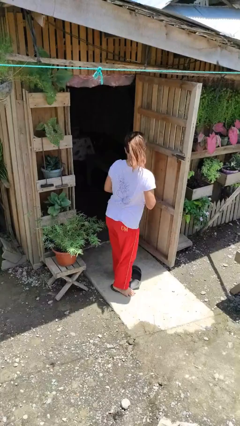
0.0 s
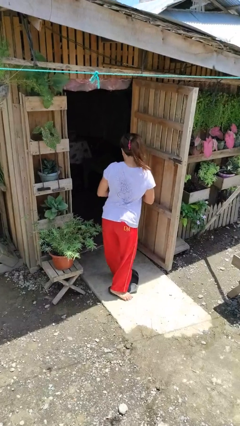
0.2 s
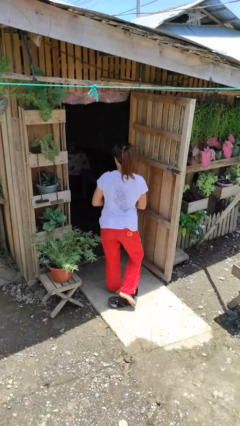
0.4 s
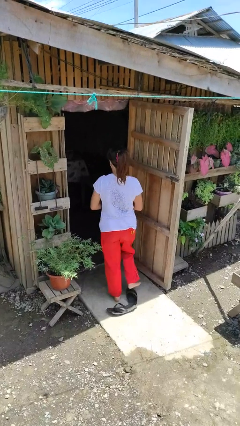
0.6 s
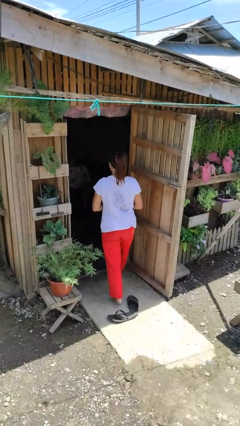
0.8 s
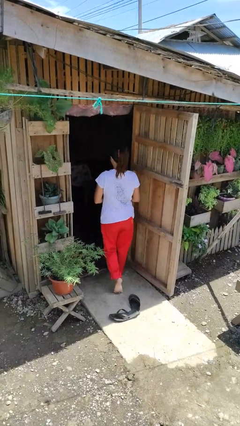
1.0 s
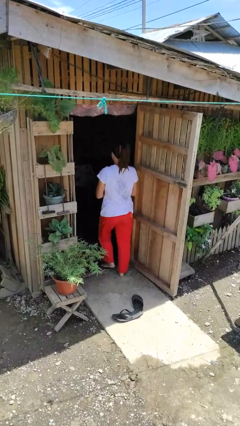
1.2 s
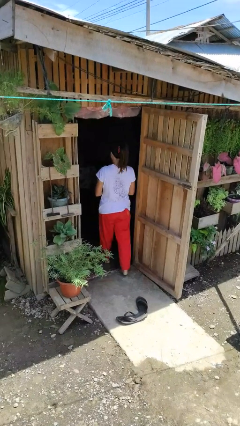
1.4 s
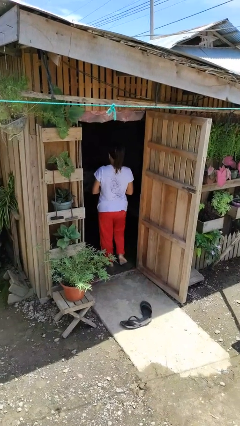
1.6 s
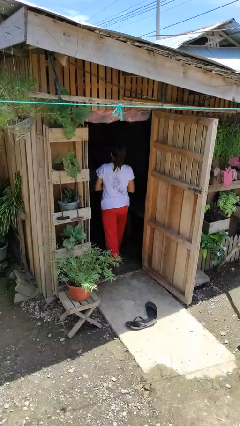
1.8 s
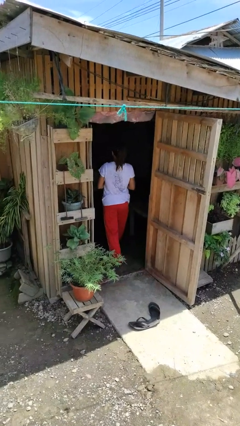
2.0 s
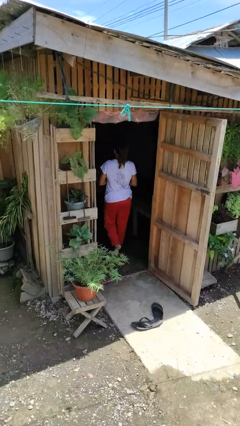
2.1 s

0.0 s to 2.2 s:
person exits scene through structure

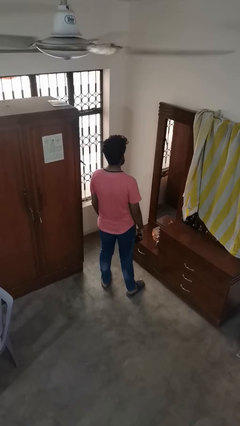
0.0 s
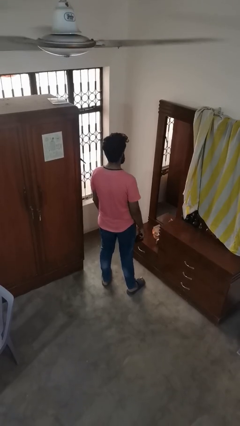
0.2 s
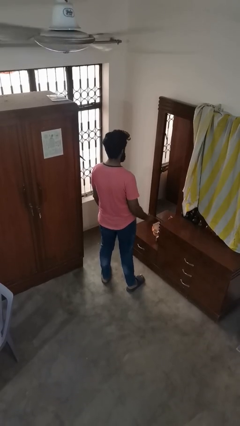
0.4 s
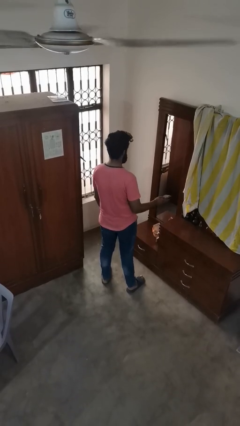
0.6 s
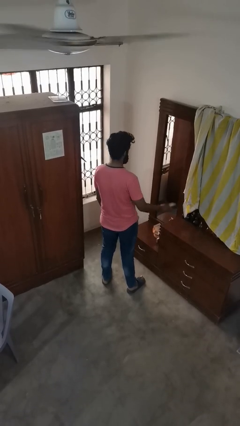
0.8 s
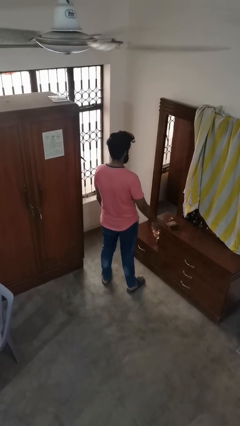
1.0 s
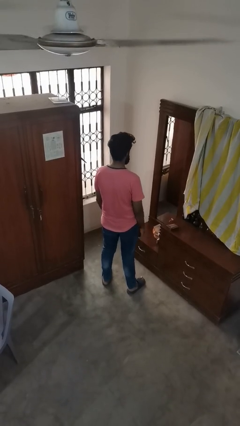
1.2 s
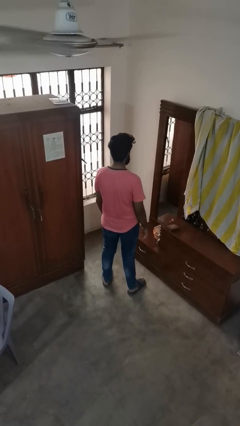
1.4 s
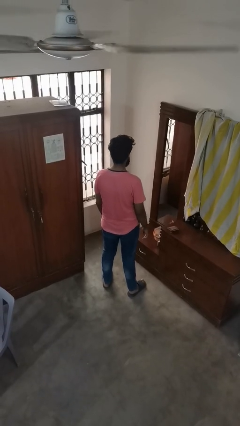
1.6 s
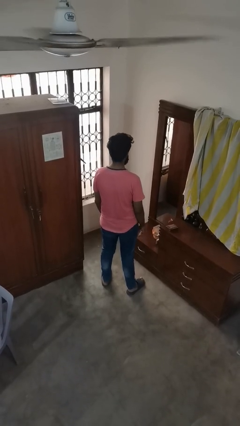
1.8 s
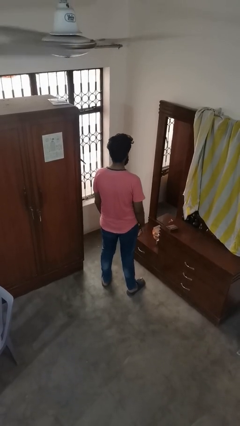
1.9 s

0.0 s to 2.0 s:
person throws object to ground

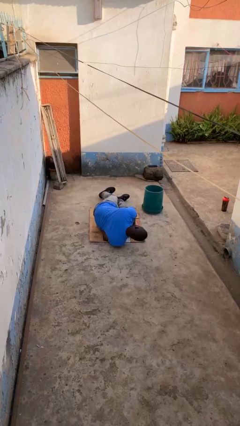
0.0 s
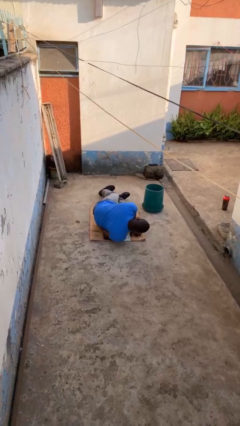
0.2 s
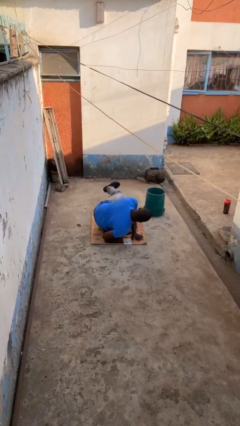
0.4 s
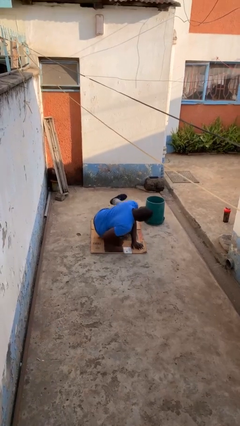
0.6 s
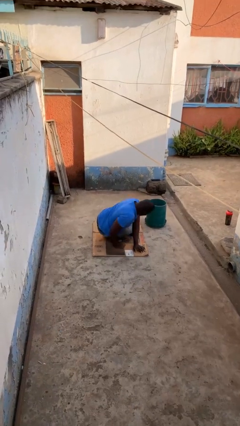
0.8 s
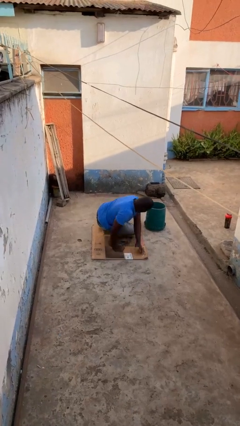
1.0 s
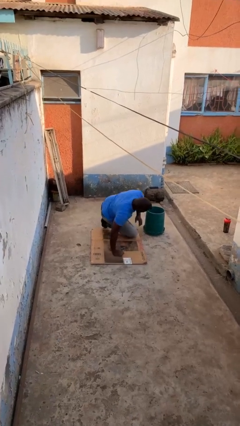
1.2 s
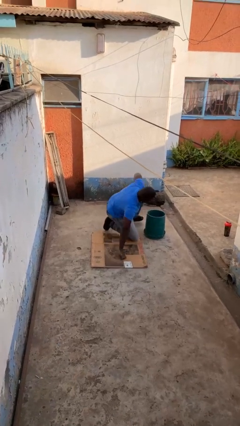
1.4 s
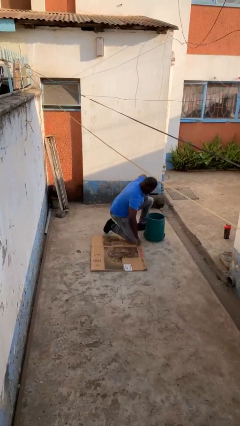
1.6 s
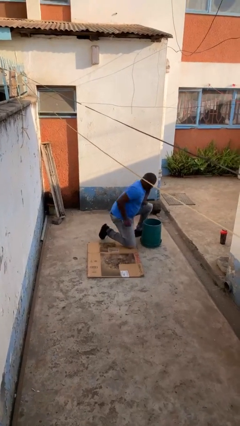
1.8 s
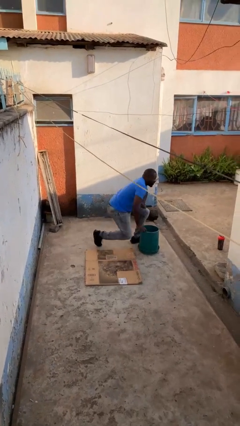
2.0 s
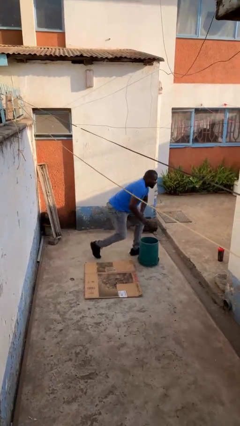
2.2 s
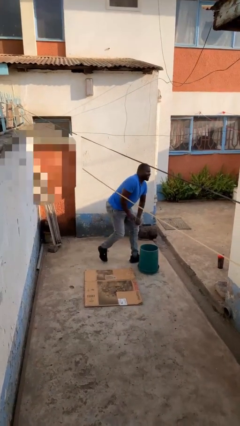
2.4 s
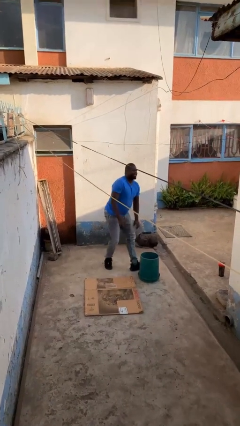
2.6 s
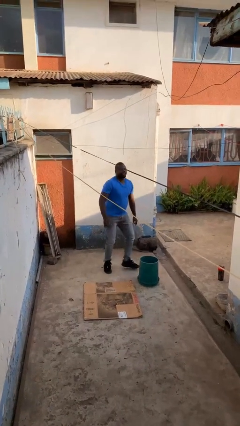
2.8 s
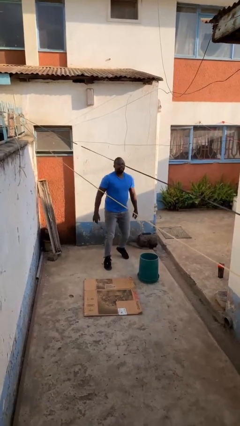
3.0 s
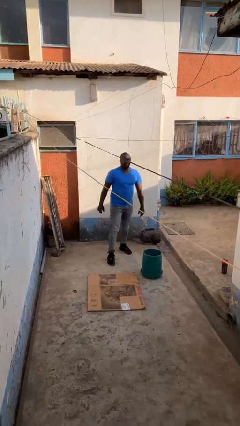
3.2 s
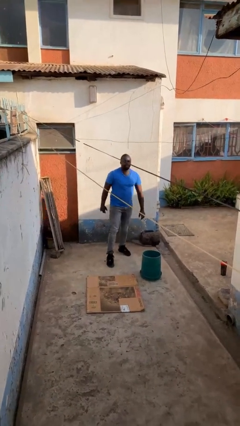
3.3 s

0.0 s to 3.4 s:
person stands up from floor

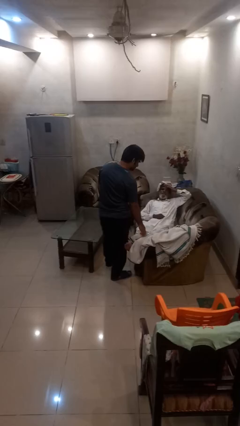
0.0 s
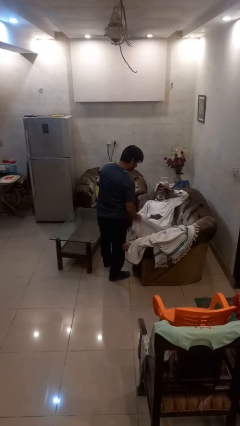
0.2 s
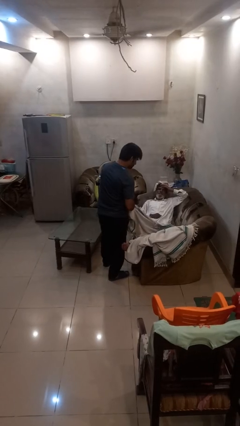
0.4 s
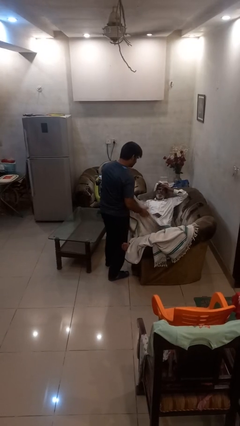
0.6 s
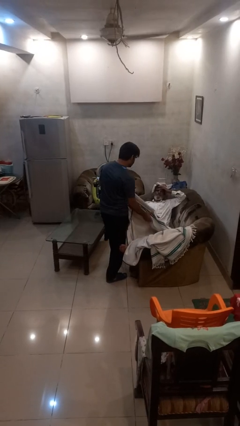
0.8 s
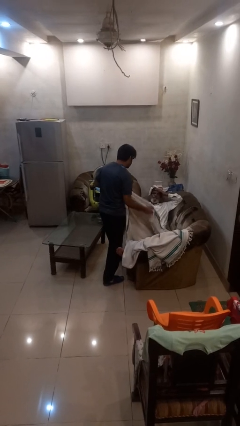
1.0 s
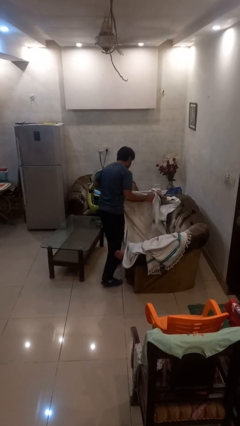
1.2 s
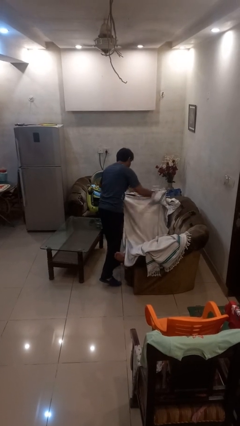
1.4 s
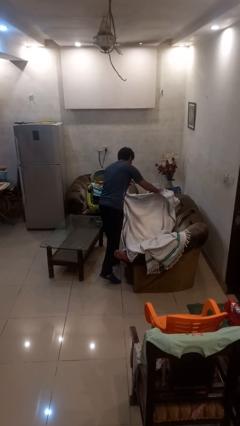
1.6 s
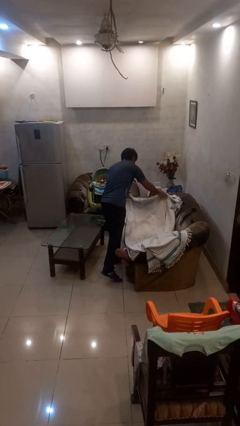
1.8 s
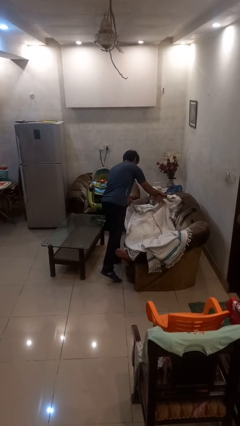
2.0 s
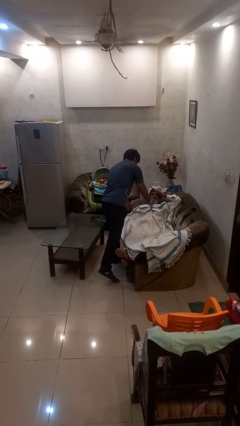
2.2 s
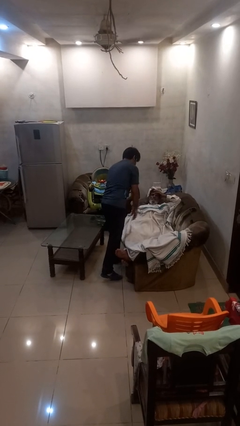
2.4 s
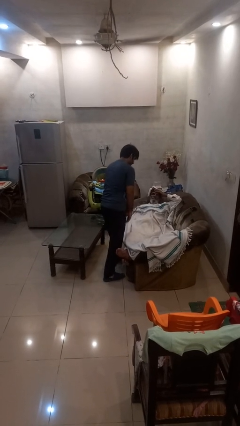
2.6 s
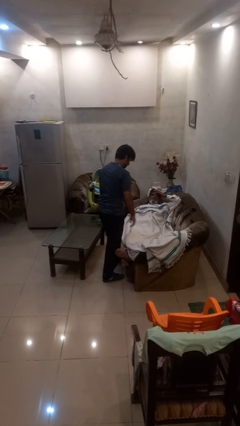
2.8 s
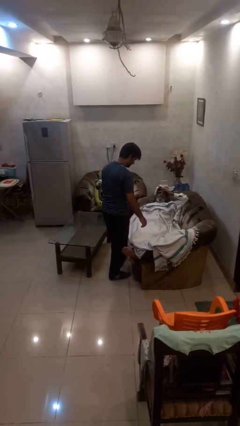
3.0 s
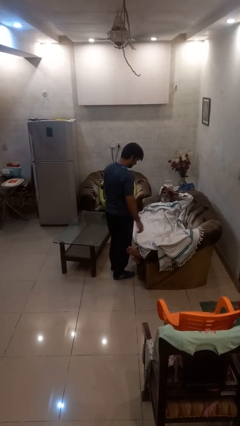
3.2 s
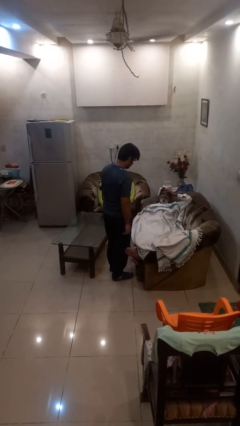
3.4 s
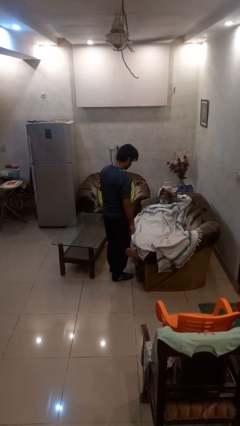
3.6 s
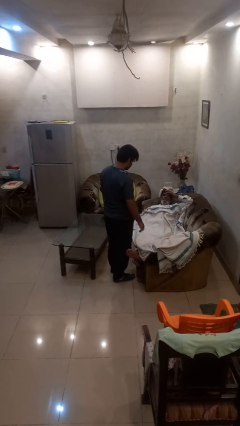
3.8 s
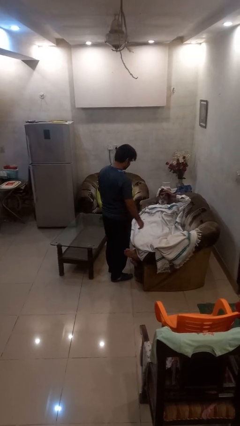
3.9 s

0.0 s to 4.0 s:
person covers friend with blanket

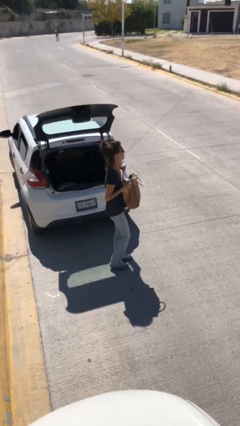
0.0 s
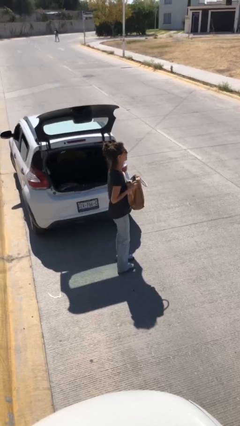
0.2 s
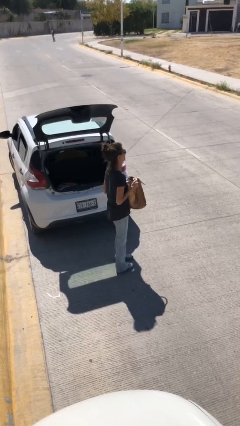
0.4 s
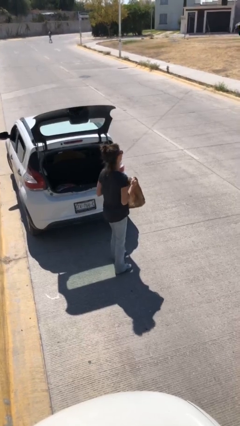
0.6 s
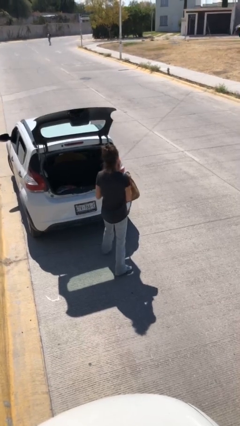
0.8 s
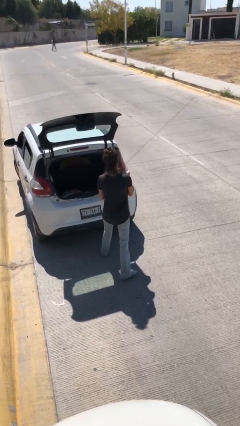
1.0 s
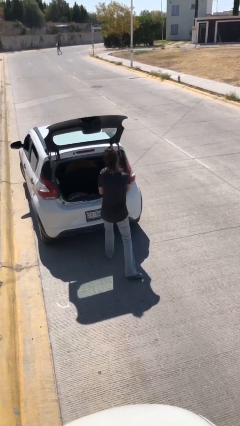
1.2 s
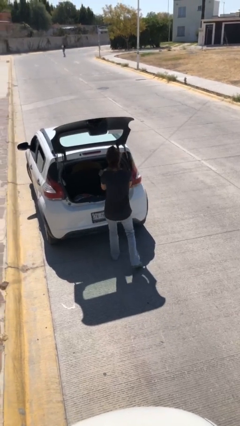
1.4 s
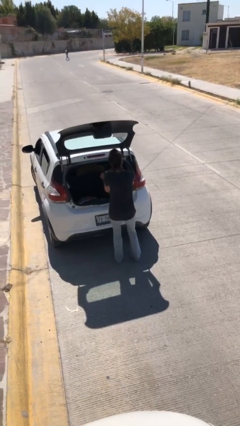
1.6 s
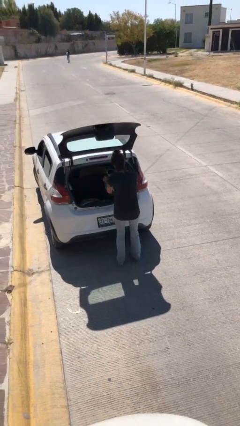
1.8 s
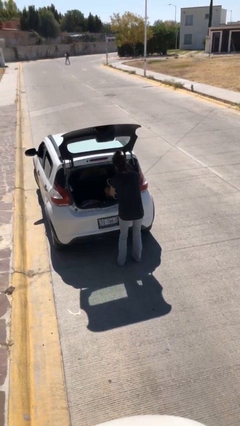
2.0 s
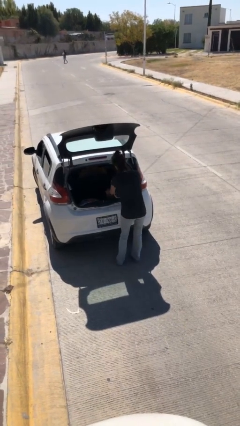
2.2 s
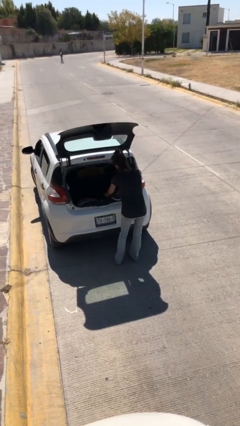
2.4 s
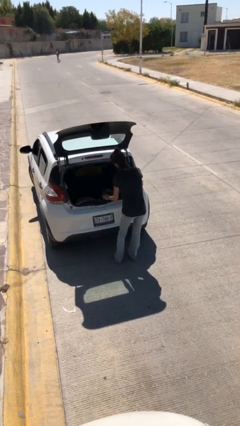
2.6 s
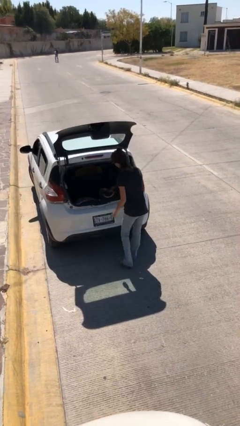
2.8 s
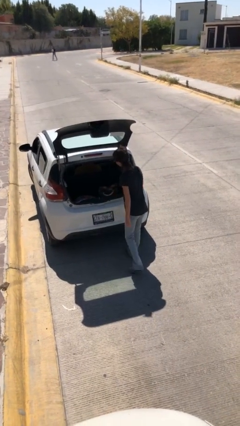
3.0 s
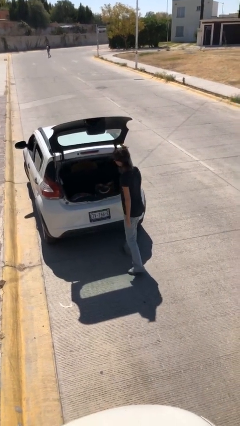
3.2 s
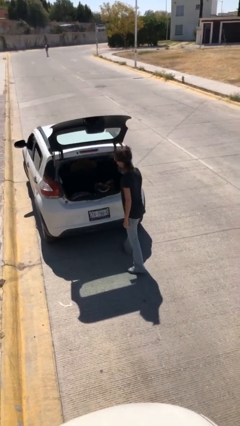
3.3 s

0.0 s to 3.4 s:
person loads car

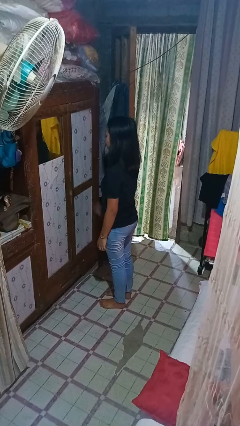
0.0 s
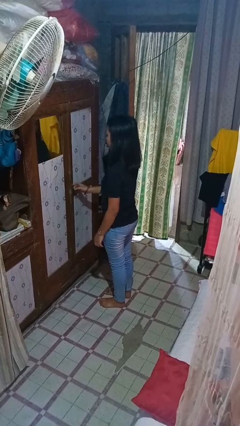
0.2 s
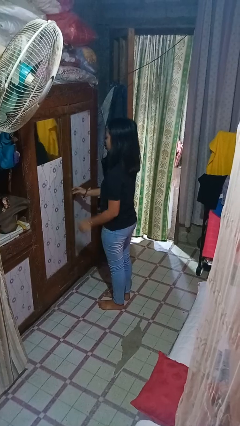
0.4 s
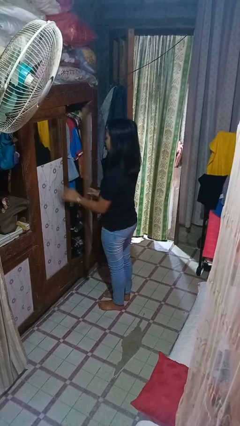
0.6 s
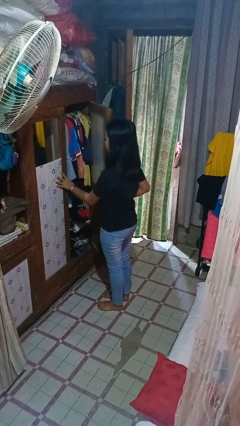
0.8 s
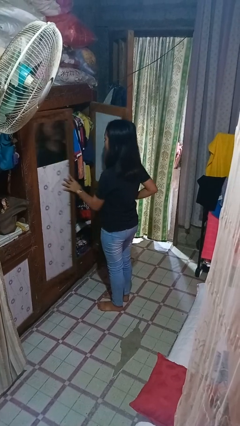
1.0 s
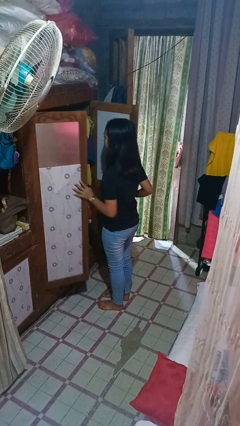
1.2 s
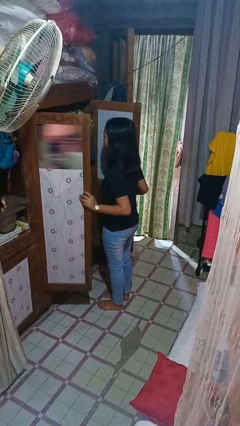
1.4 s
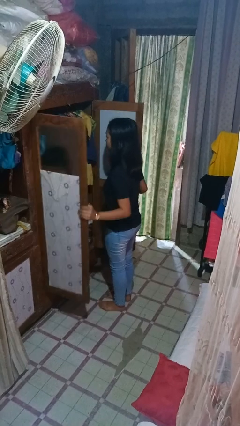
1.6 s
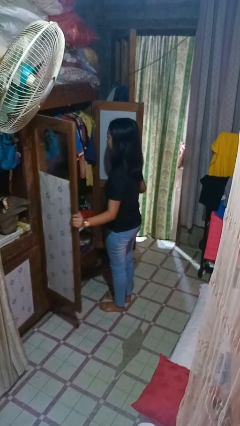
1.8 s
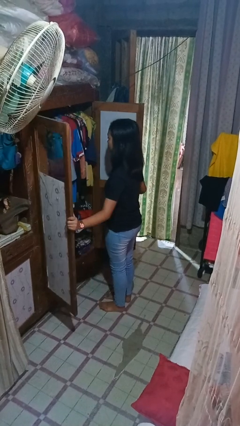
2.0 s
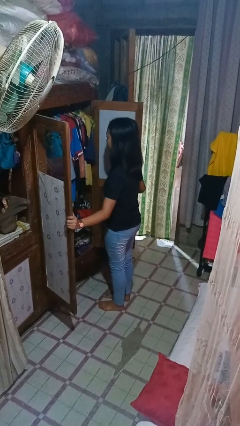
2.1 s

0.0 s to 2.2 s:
person opens closet door

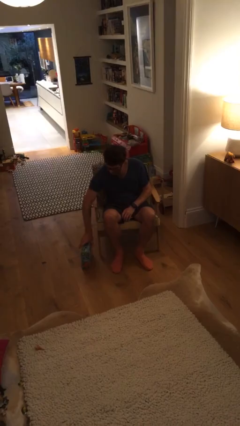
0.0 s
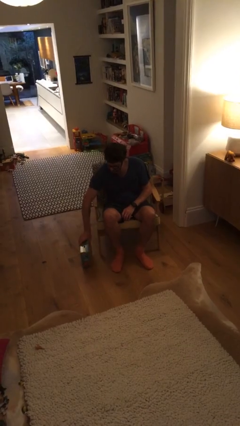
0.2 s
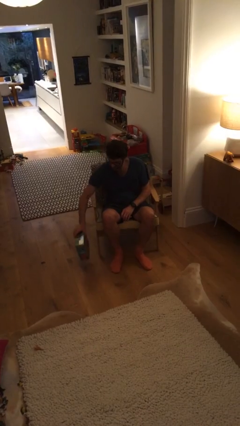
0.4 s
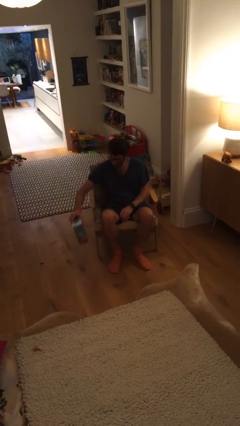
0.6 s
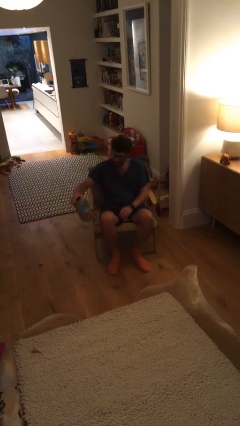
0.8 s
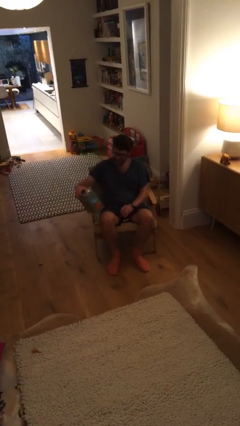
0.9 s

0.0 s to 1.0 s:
person picks up object from floor
